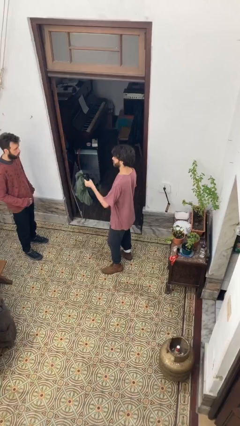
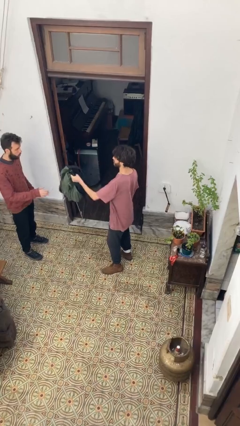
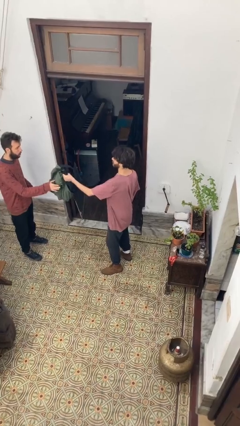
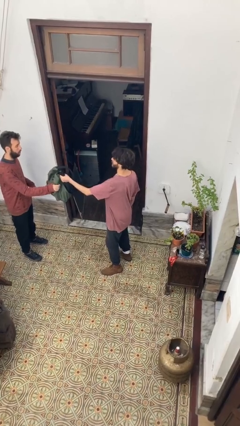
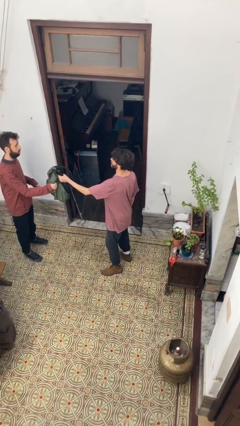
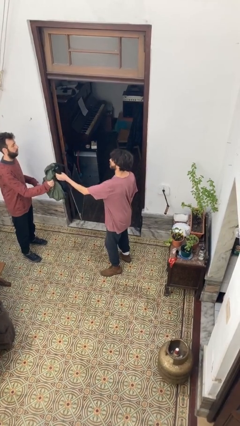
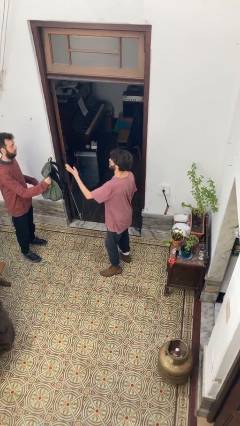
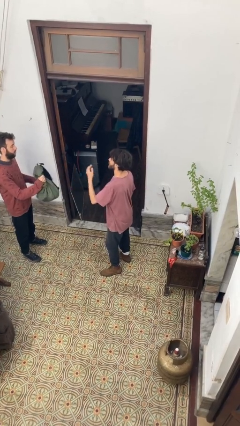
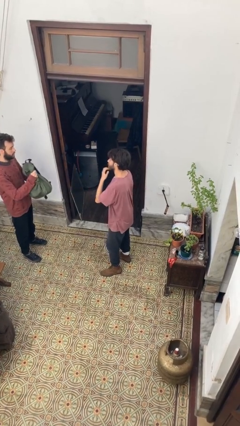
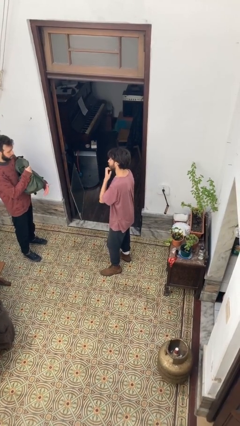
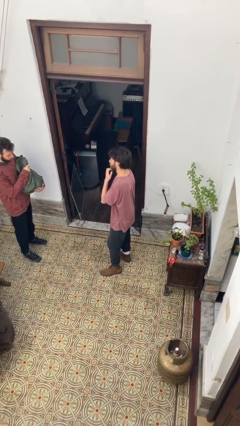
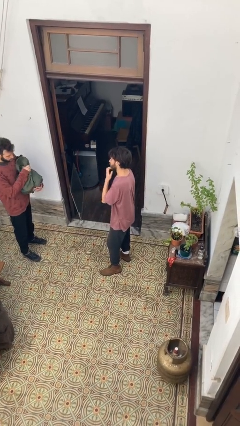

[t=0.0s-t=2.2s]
person transfers object to person

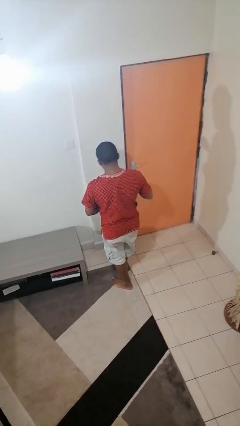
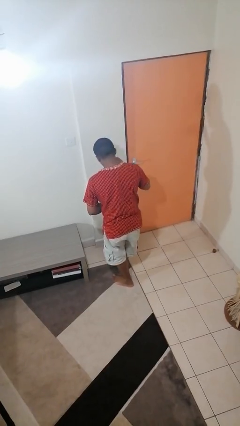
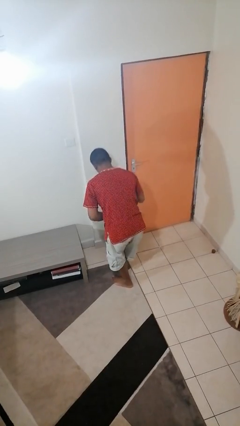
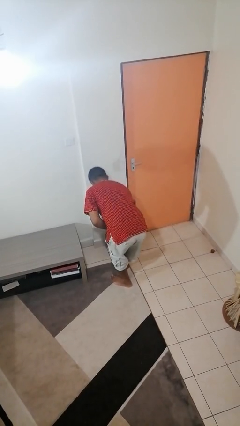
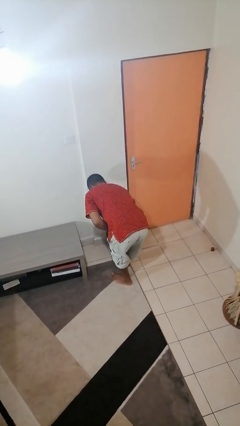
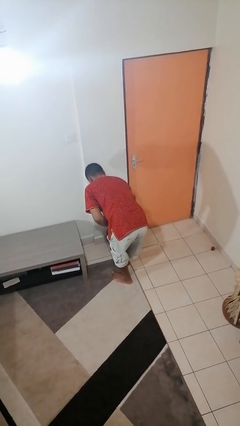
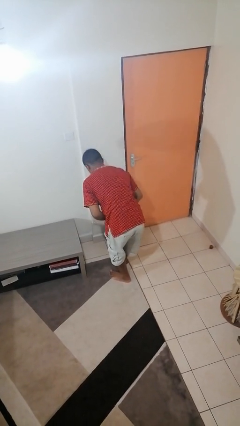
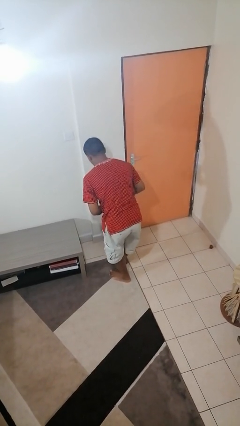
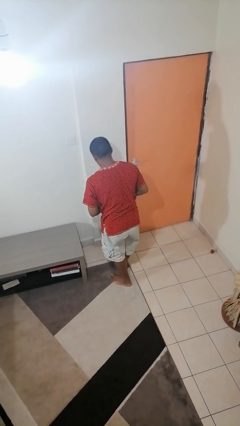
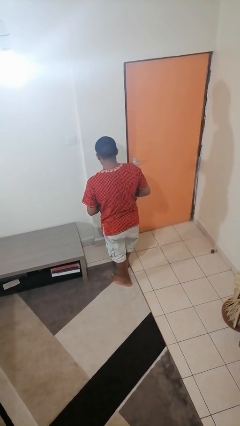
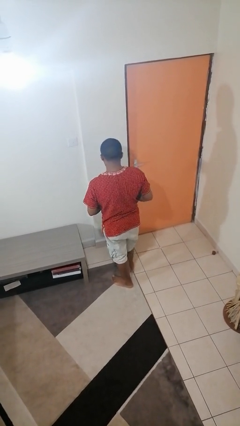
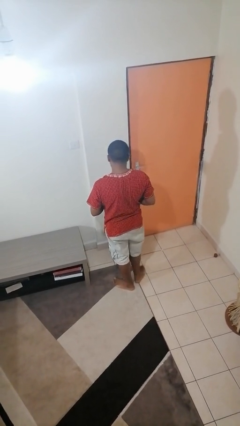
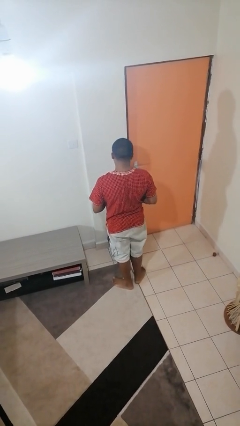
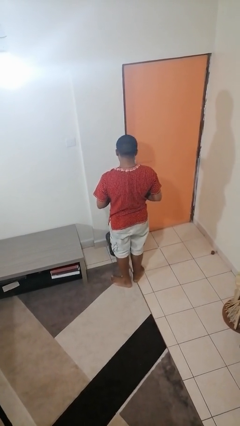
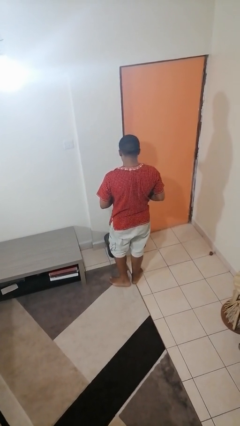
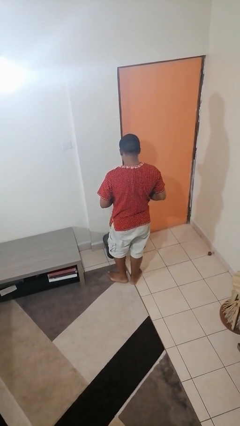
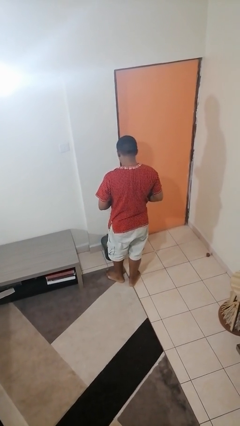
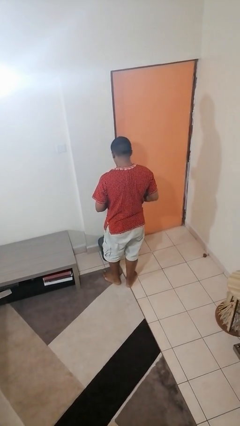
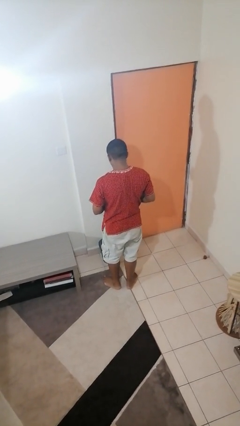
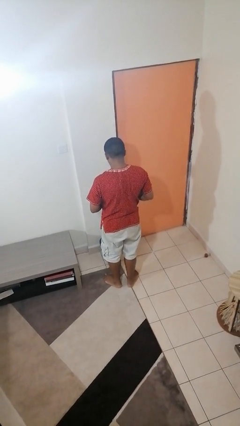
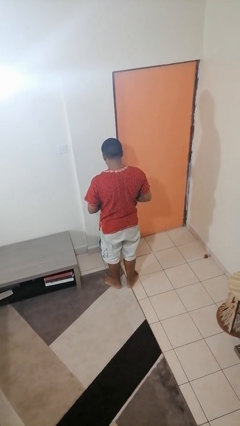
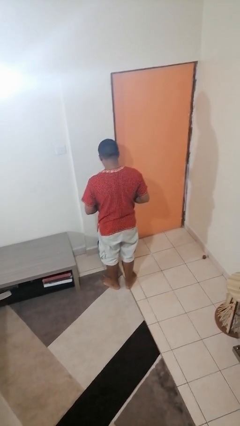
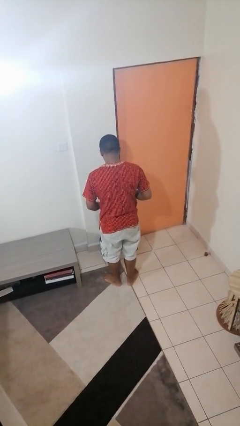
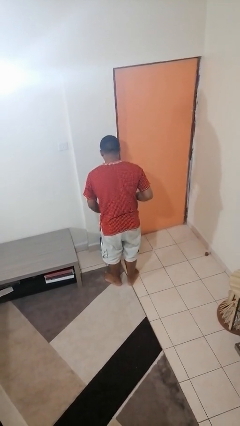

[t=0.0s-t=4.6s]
person discards trash

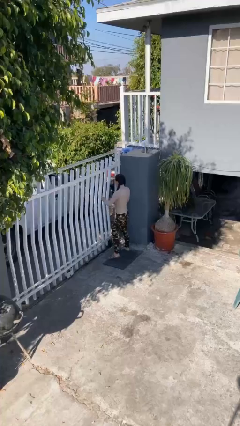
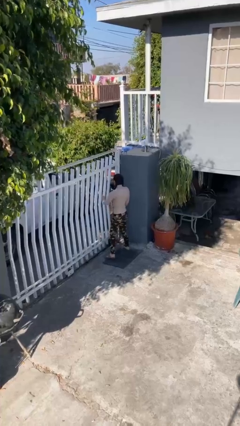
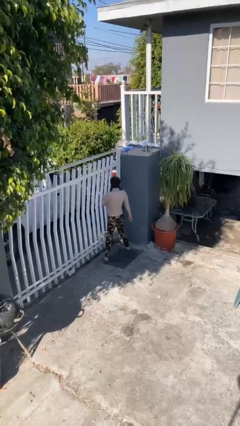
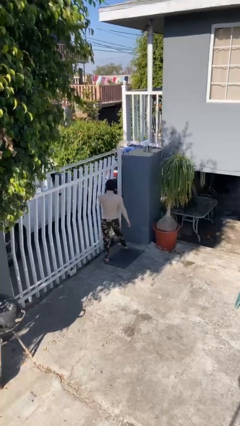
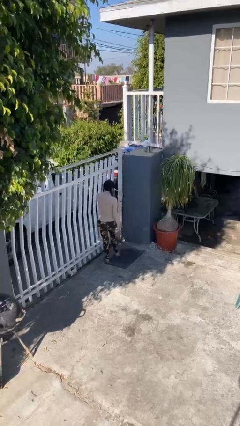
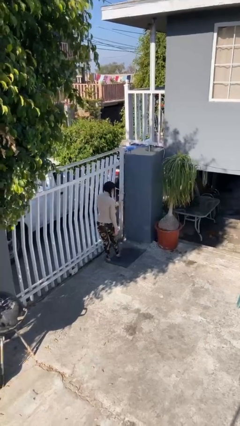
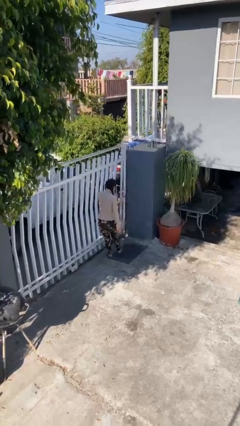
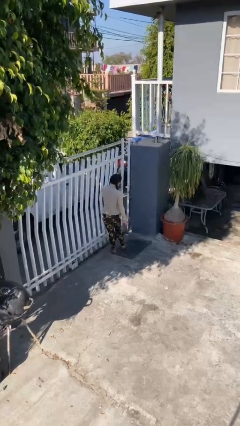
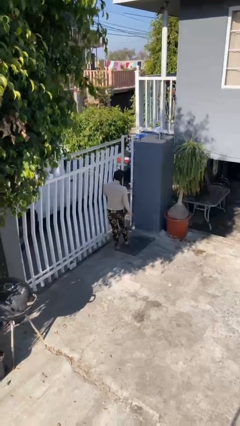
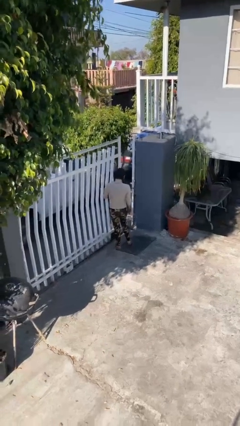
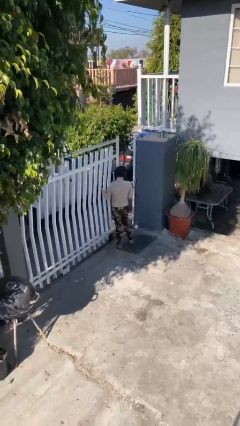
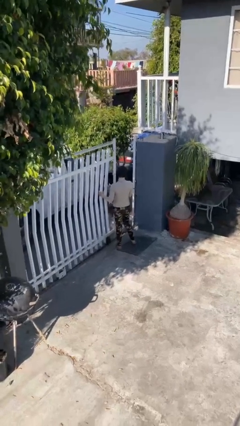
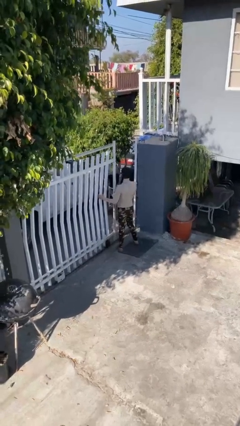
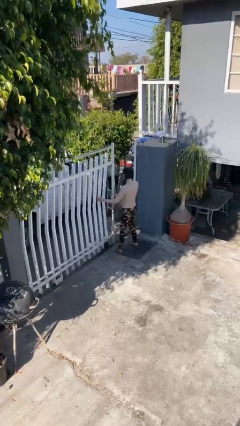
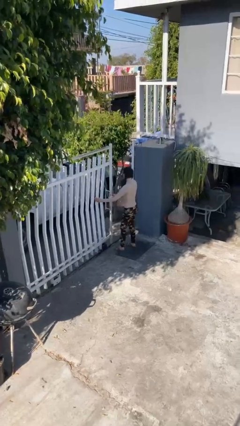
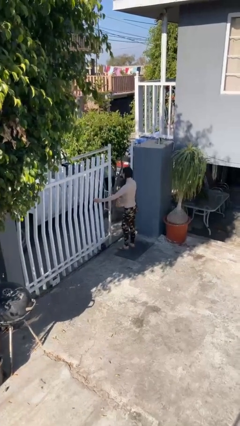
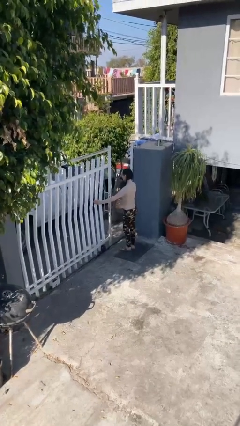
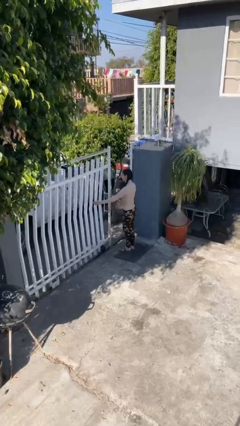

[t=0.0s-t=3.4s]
person opens facility door

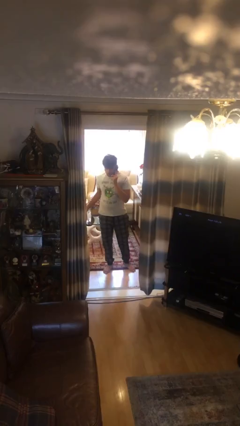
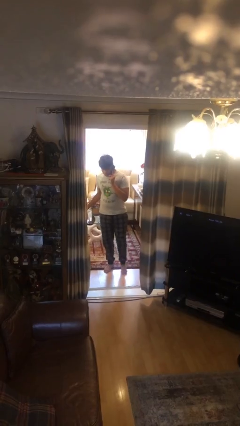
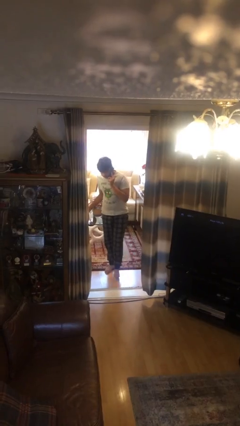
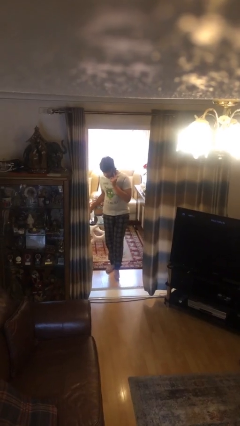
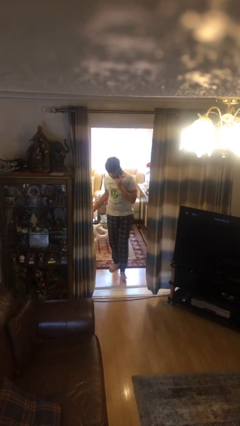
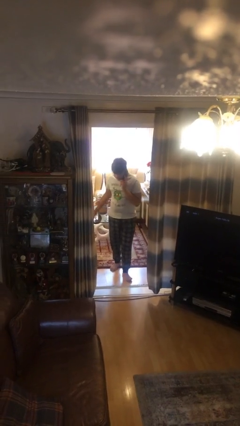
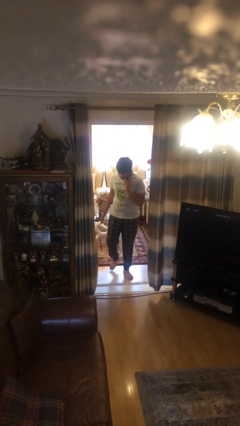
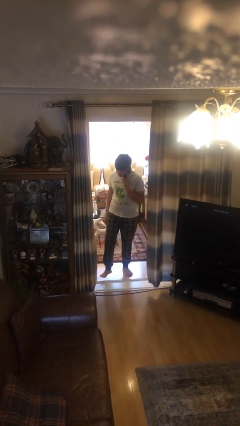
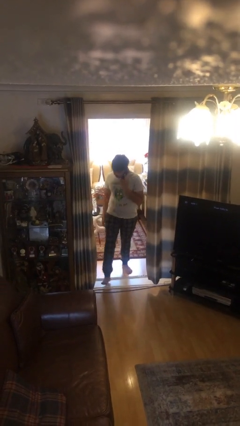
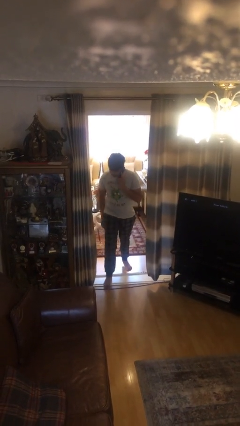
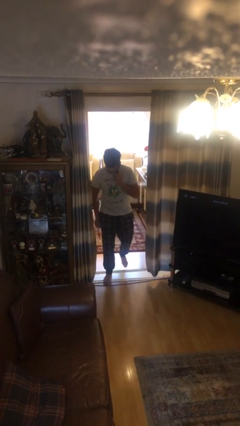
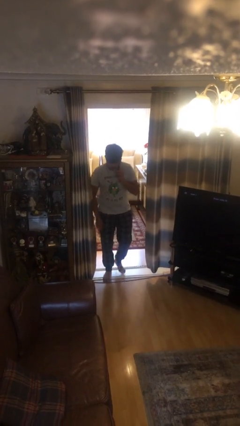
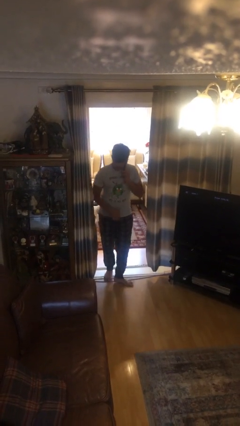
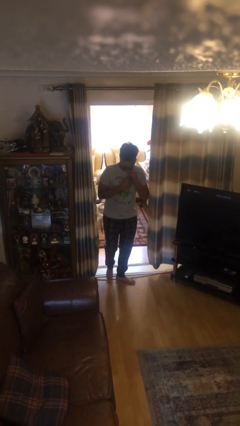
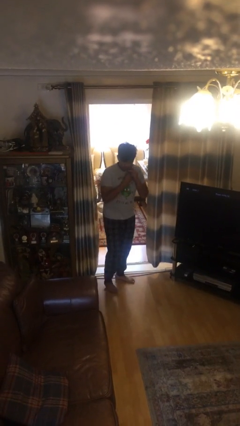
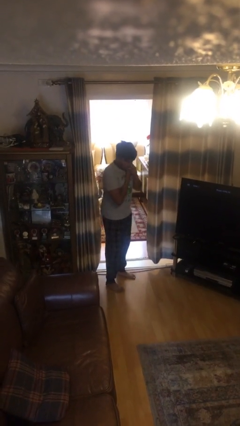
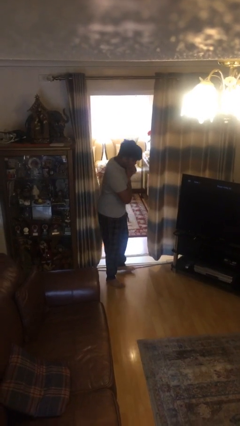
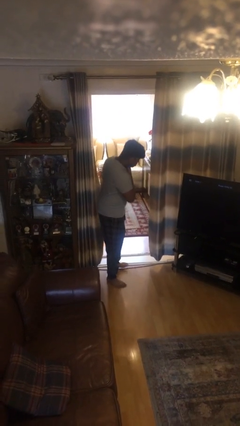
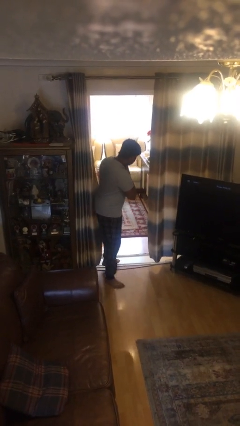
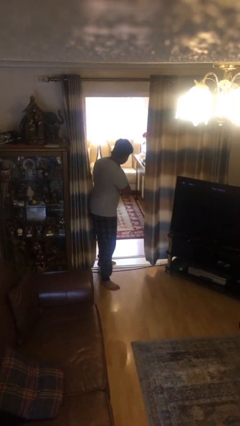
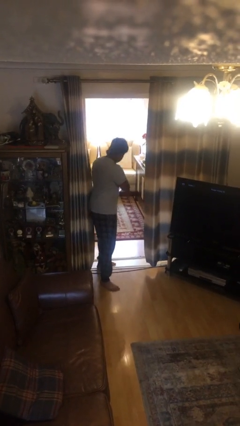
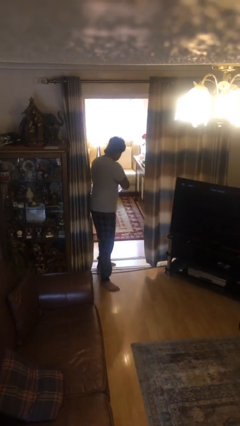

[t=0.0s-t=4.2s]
person enters scene through structure

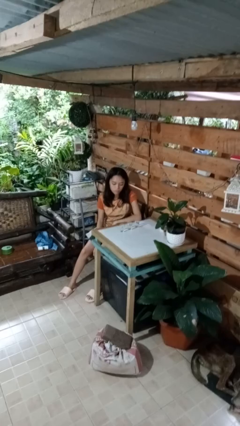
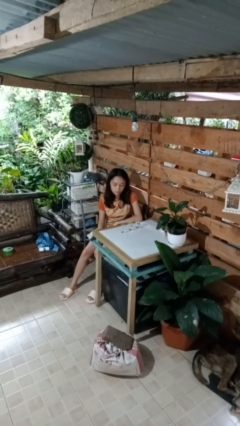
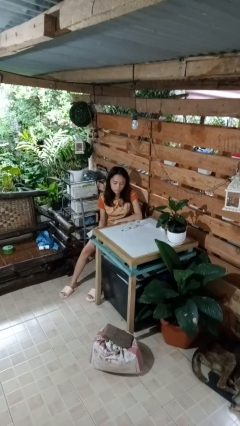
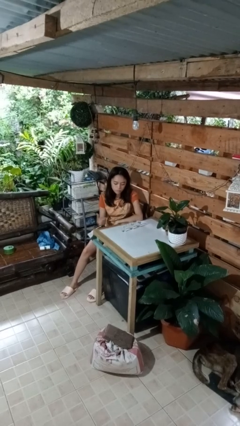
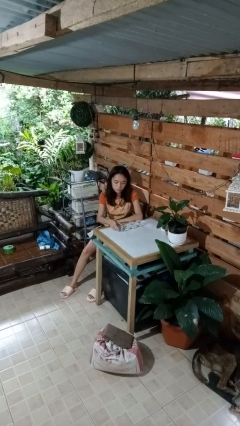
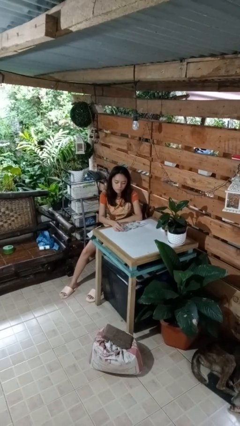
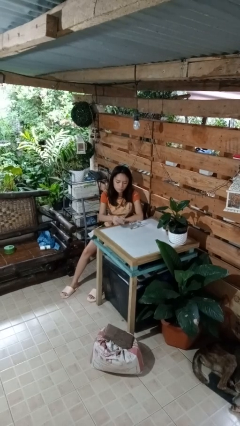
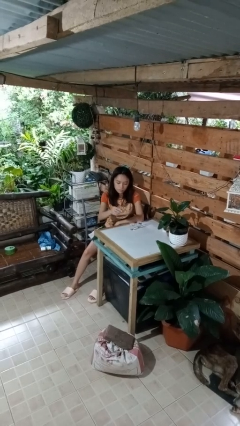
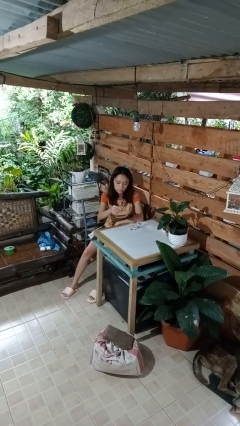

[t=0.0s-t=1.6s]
person picks up object from table

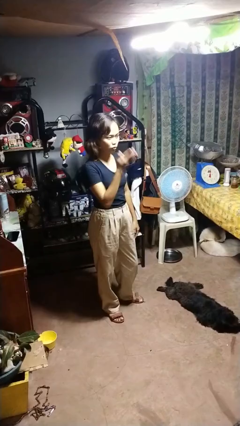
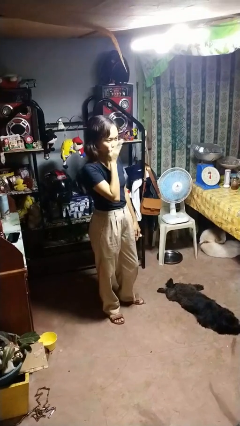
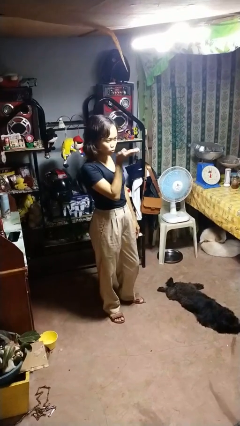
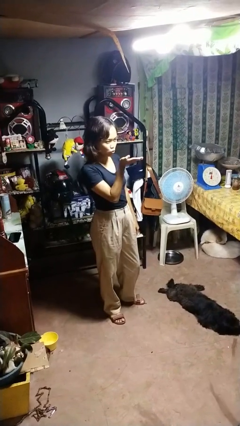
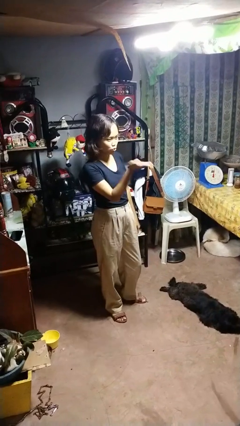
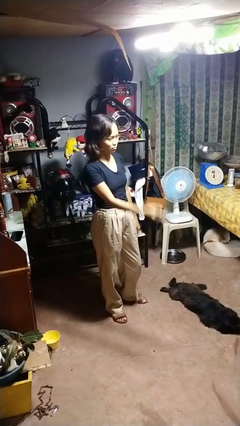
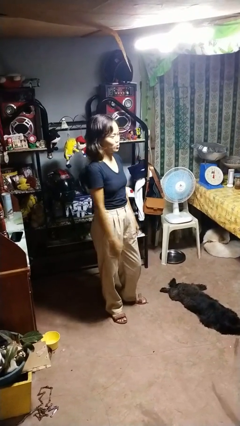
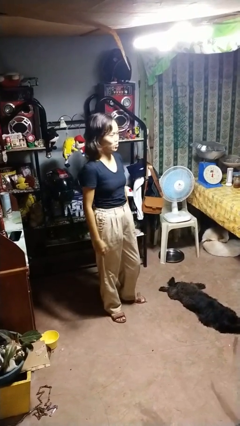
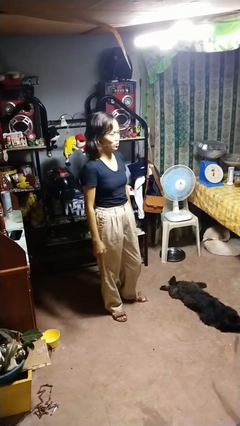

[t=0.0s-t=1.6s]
person gestures blow kiss
